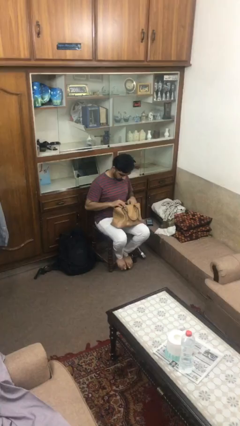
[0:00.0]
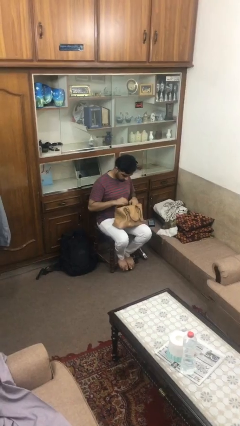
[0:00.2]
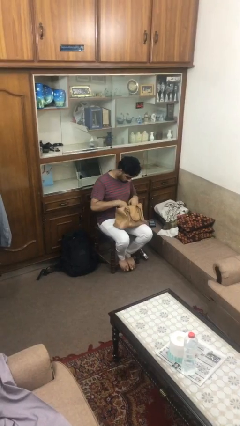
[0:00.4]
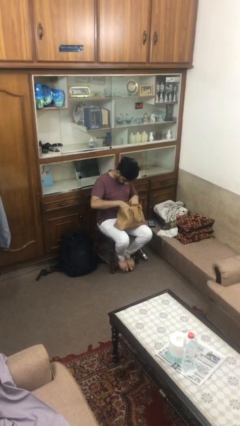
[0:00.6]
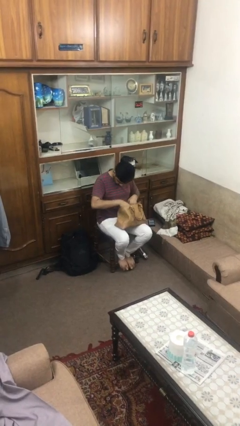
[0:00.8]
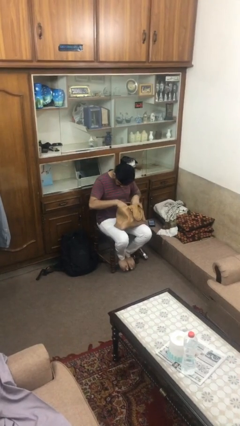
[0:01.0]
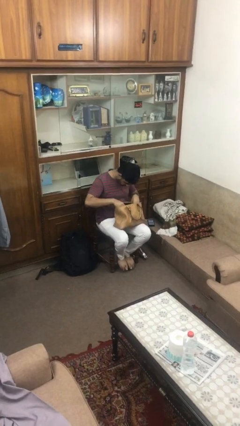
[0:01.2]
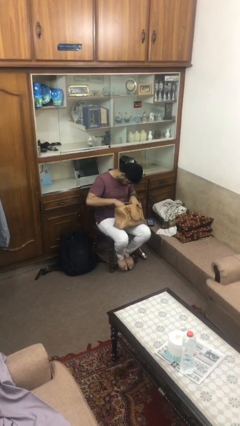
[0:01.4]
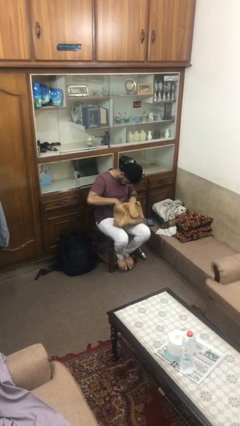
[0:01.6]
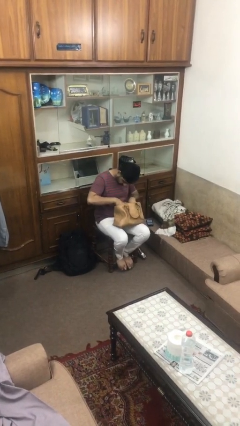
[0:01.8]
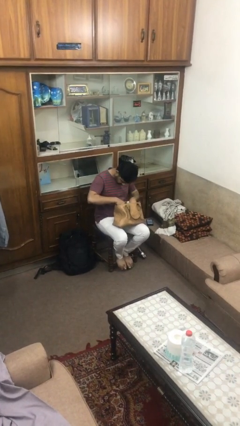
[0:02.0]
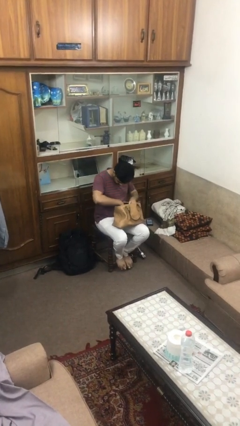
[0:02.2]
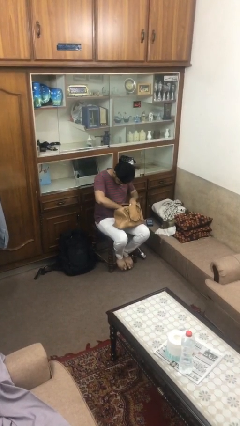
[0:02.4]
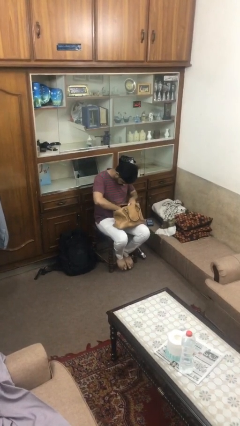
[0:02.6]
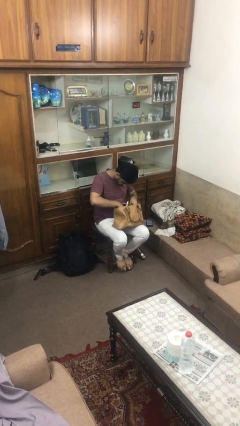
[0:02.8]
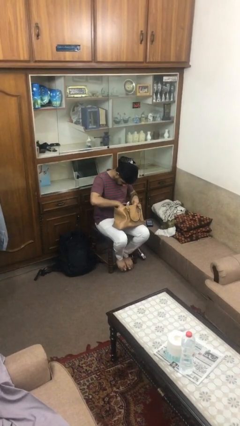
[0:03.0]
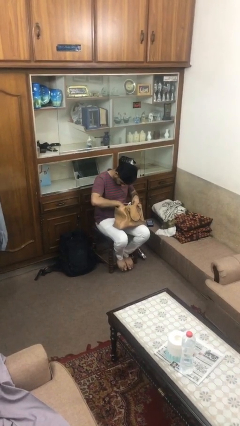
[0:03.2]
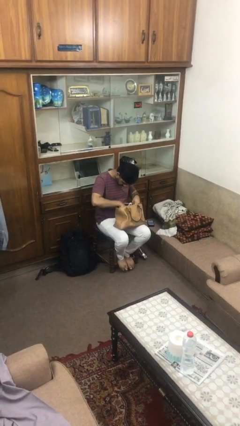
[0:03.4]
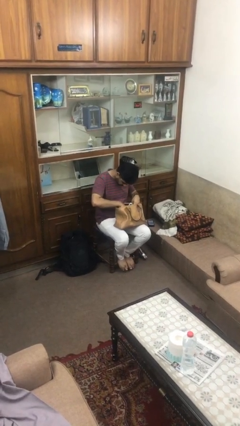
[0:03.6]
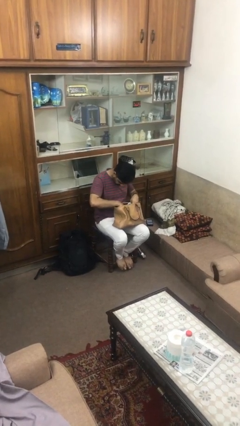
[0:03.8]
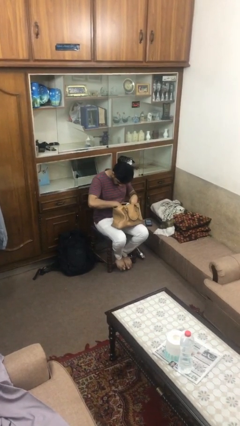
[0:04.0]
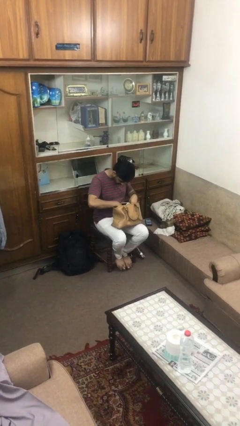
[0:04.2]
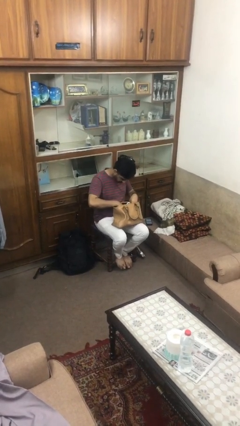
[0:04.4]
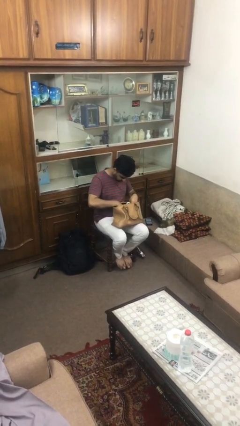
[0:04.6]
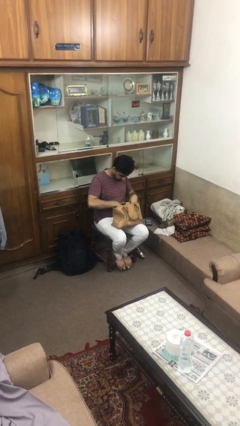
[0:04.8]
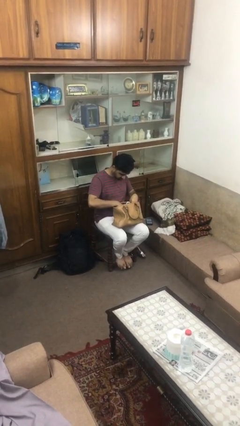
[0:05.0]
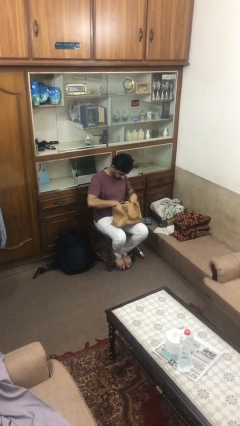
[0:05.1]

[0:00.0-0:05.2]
person searches in purse

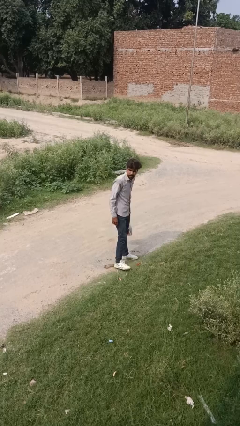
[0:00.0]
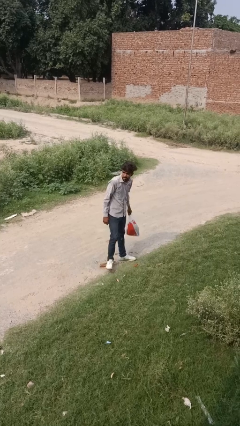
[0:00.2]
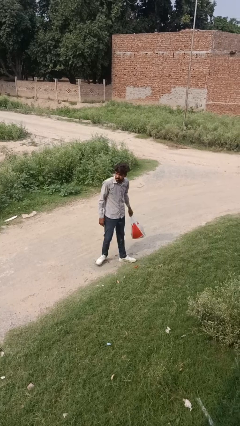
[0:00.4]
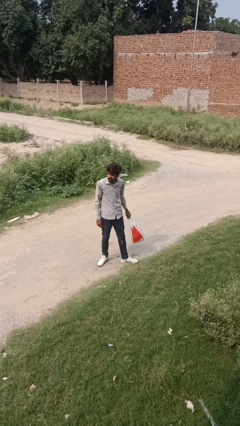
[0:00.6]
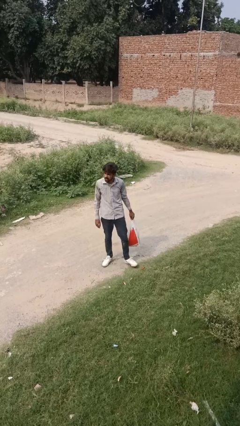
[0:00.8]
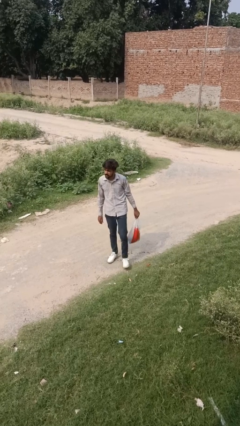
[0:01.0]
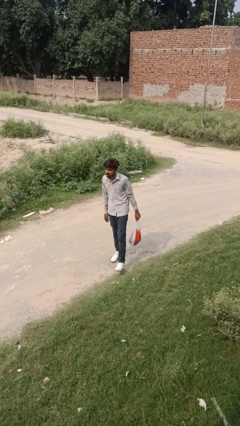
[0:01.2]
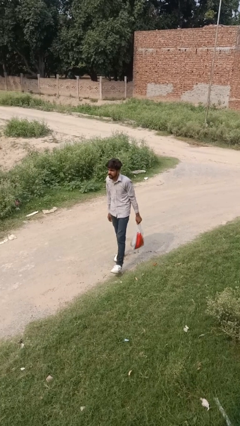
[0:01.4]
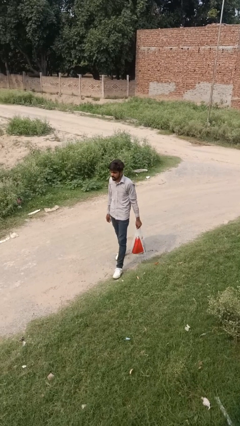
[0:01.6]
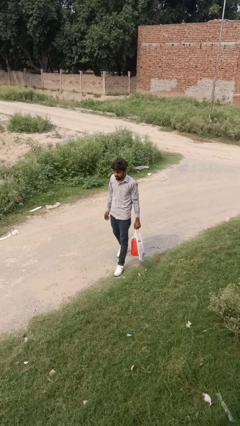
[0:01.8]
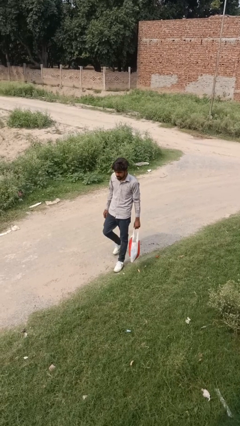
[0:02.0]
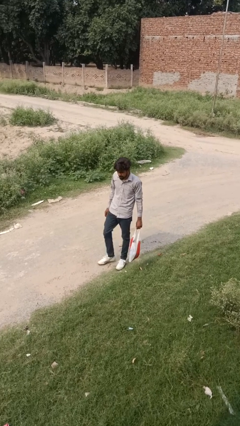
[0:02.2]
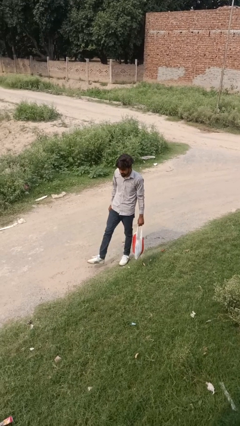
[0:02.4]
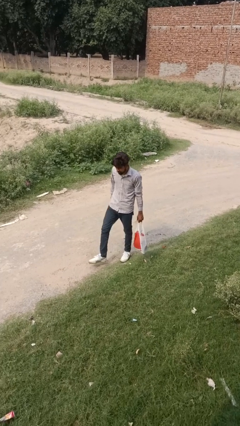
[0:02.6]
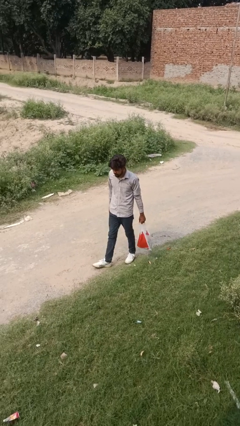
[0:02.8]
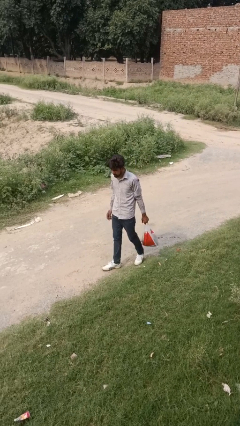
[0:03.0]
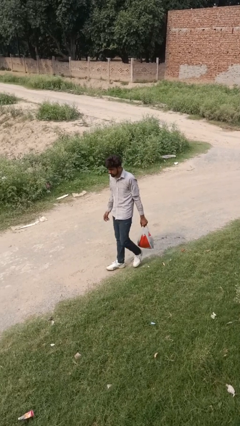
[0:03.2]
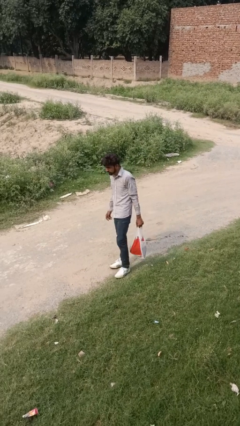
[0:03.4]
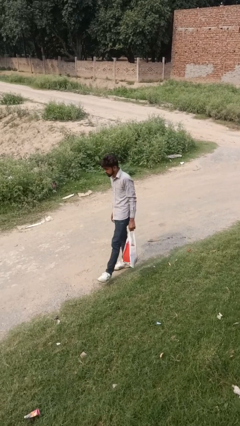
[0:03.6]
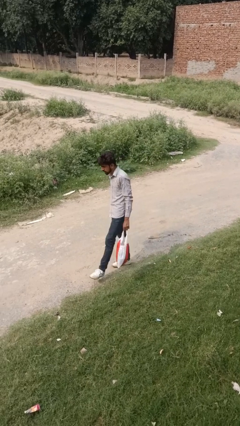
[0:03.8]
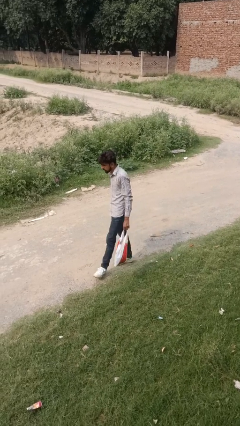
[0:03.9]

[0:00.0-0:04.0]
person carries groceries

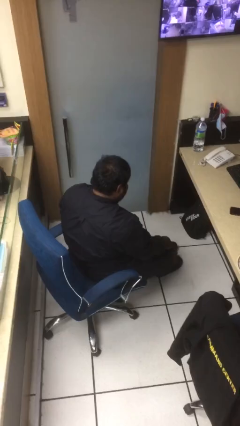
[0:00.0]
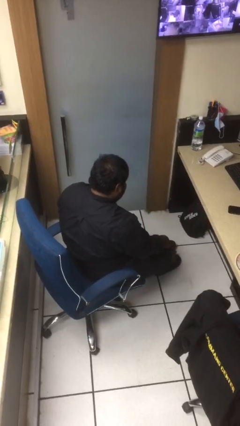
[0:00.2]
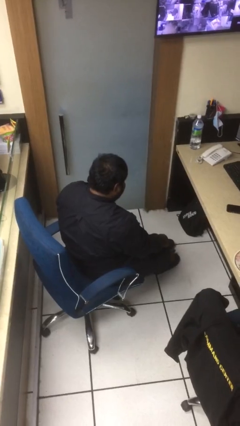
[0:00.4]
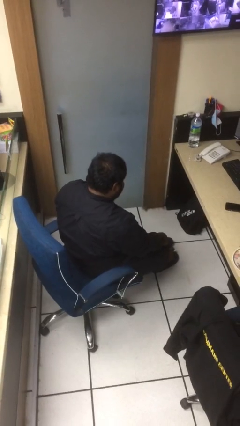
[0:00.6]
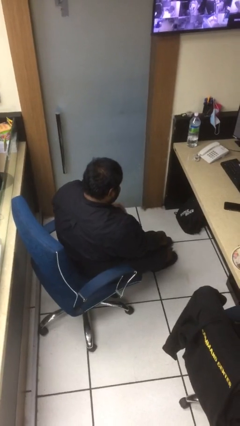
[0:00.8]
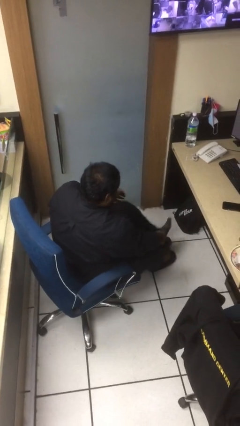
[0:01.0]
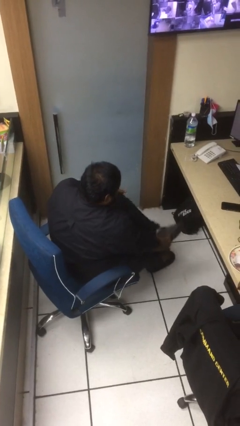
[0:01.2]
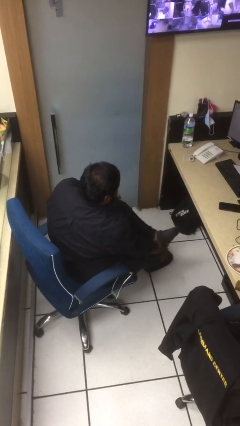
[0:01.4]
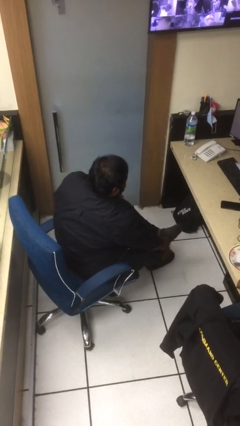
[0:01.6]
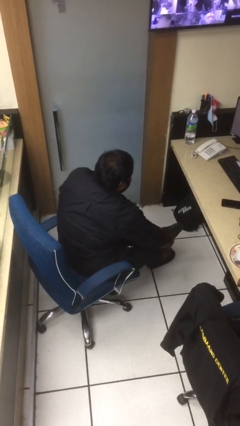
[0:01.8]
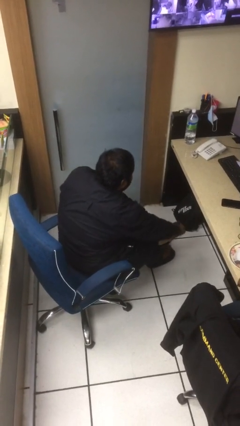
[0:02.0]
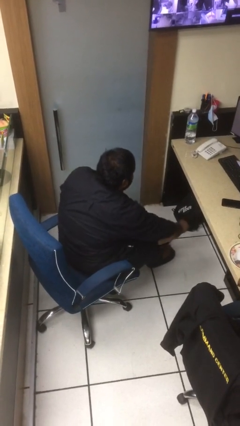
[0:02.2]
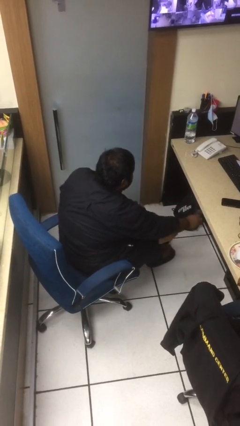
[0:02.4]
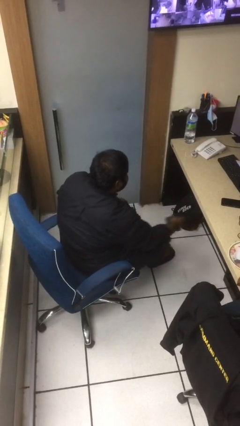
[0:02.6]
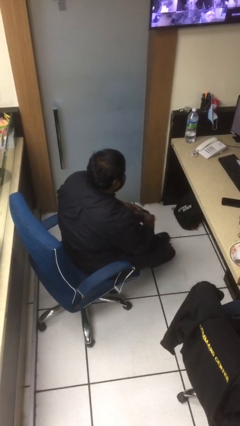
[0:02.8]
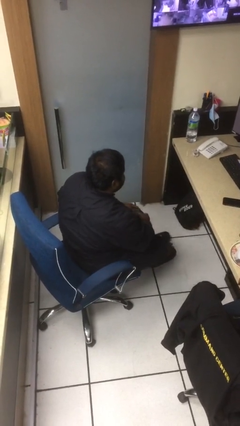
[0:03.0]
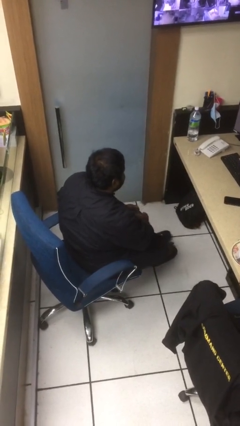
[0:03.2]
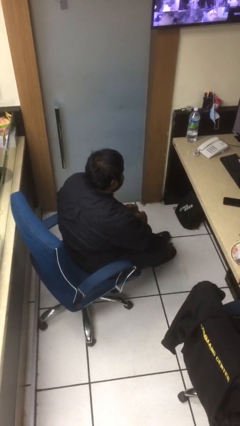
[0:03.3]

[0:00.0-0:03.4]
person takes off socks

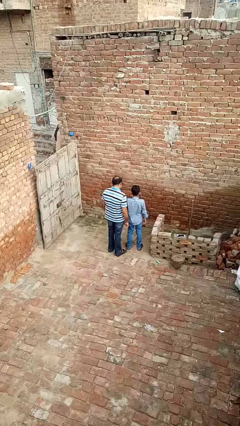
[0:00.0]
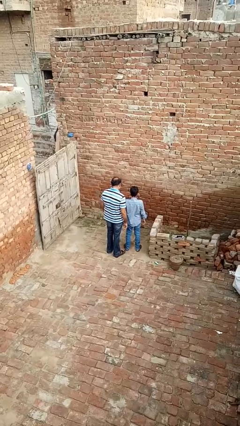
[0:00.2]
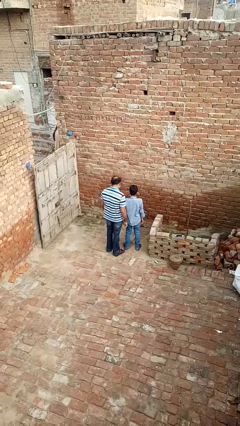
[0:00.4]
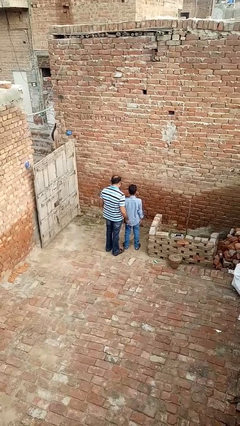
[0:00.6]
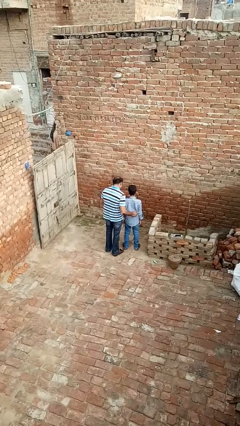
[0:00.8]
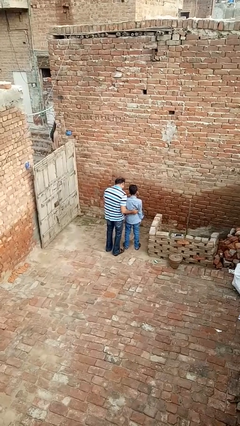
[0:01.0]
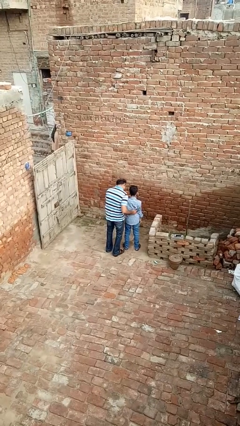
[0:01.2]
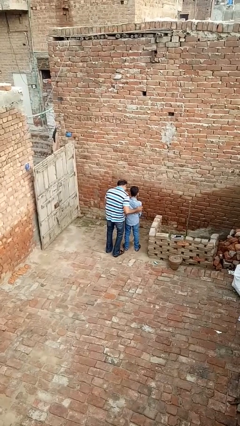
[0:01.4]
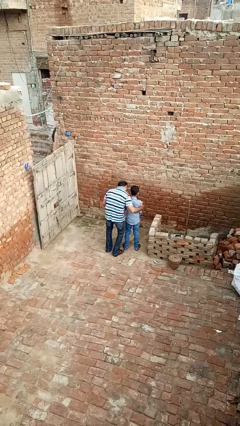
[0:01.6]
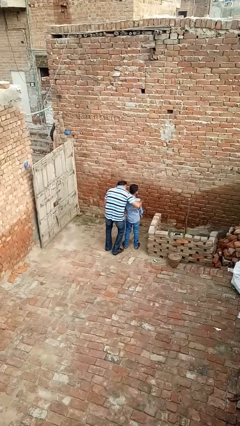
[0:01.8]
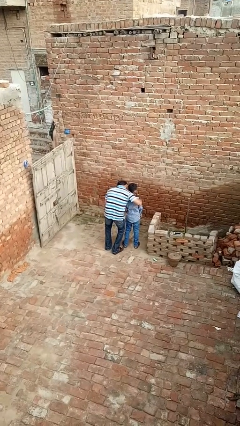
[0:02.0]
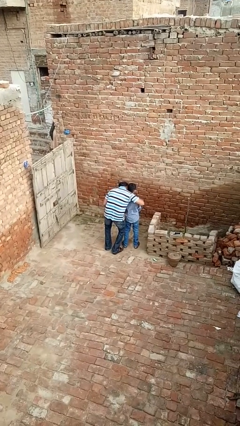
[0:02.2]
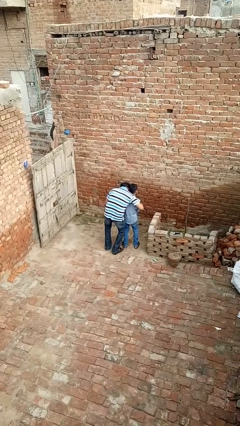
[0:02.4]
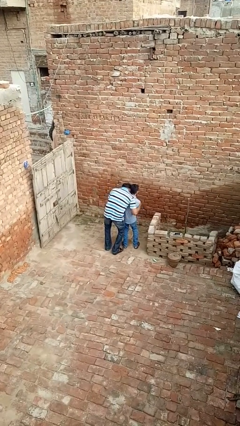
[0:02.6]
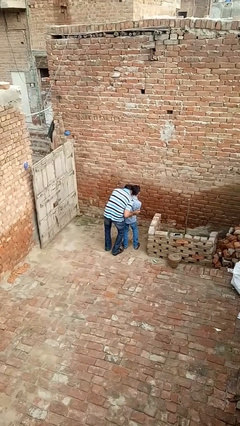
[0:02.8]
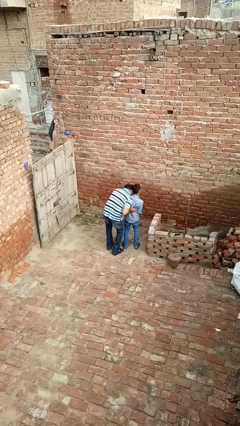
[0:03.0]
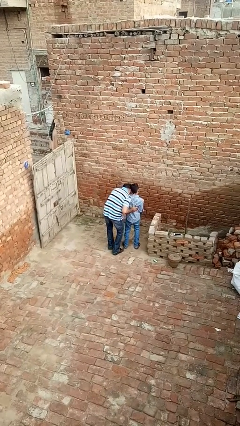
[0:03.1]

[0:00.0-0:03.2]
person tickles person

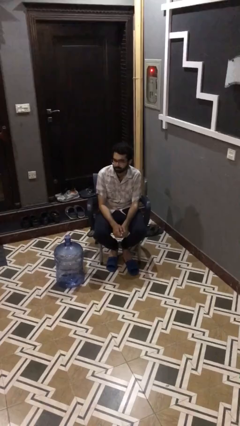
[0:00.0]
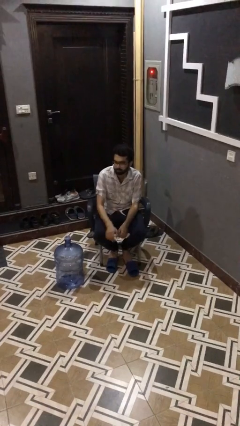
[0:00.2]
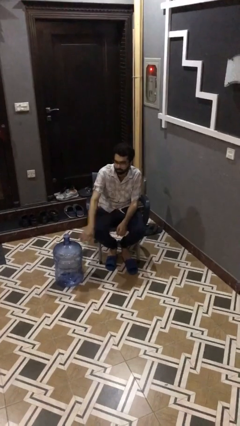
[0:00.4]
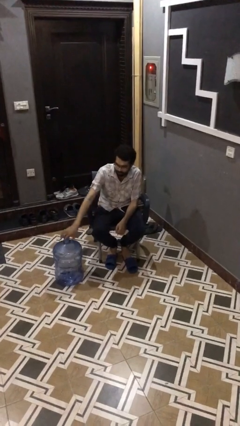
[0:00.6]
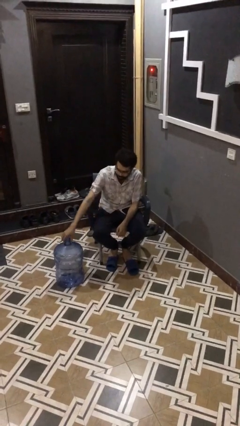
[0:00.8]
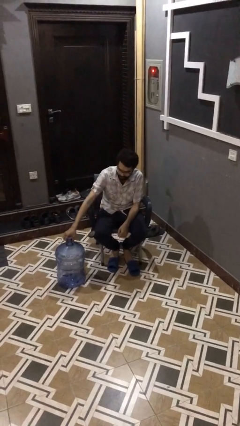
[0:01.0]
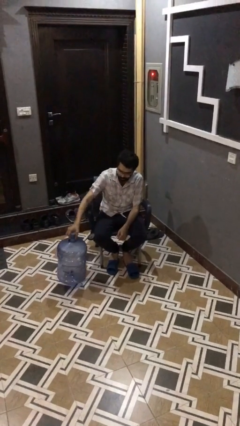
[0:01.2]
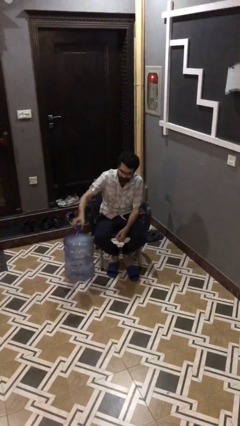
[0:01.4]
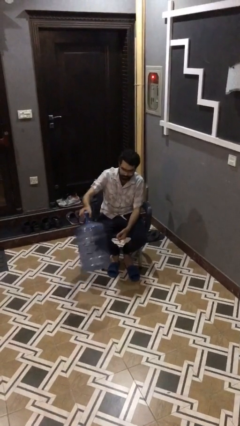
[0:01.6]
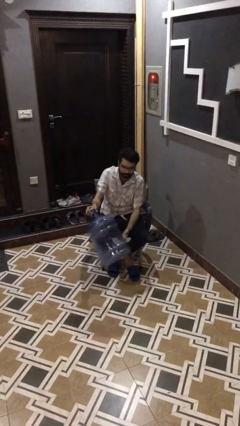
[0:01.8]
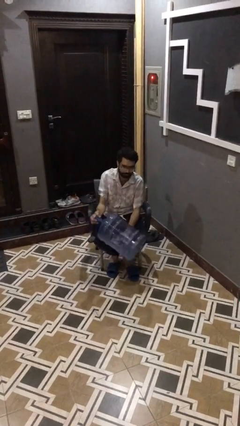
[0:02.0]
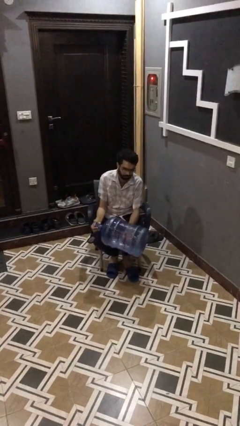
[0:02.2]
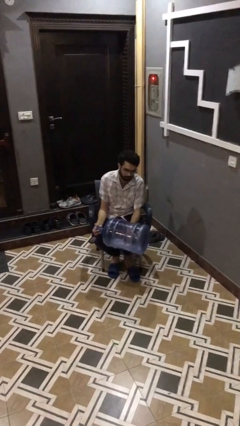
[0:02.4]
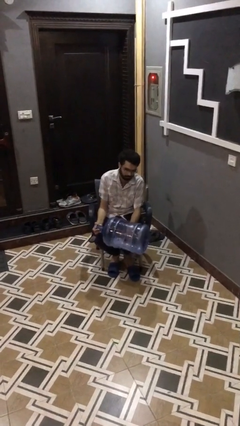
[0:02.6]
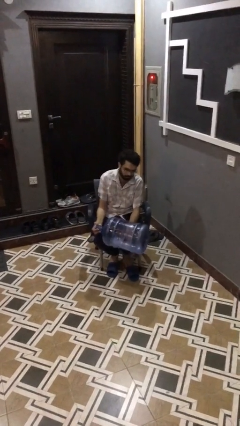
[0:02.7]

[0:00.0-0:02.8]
person picks up object from floor
